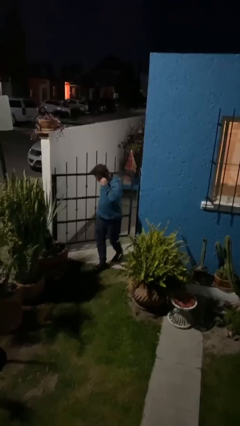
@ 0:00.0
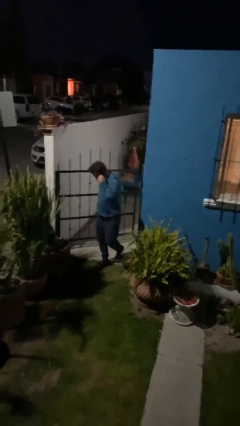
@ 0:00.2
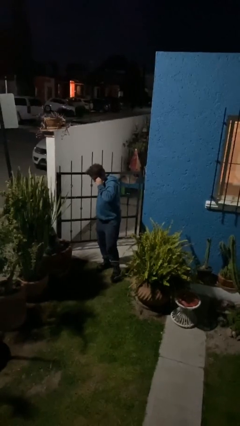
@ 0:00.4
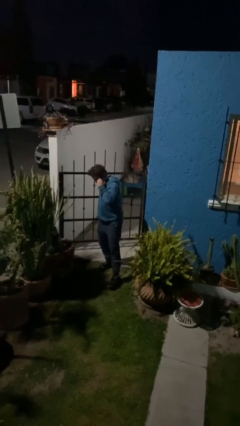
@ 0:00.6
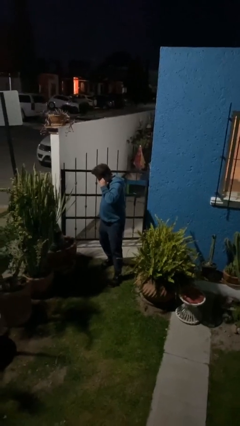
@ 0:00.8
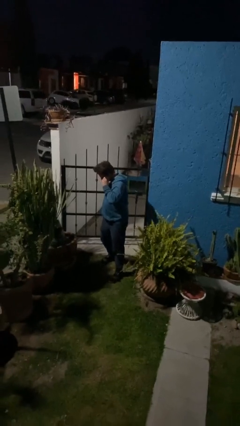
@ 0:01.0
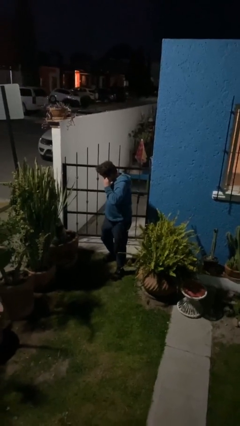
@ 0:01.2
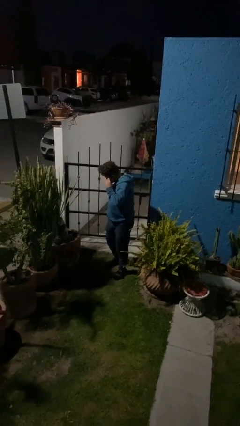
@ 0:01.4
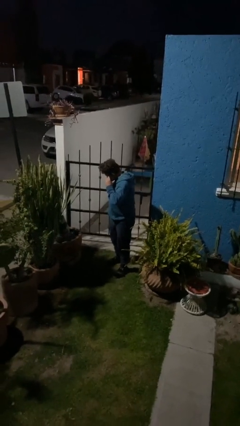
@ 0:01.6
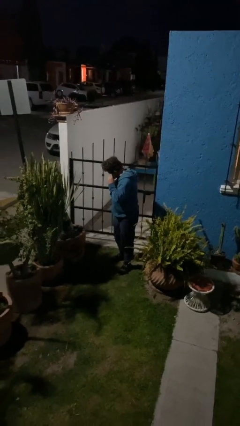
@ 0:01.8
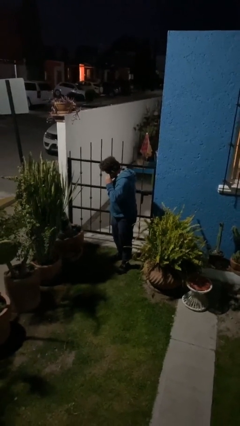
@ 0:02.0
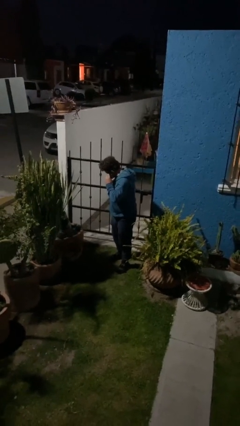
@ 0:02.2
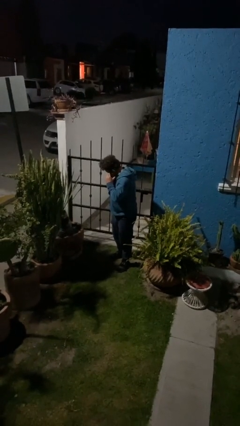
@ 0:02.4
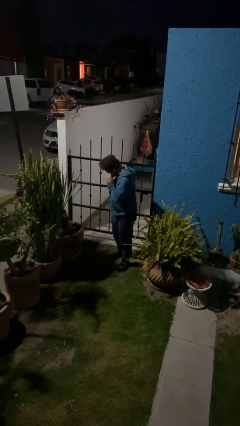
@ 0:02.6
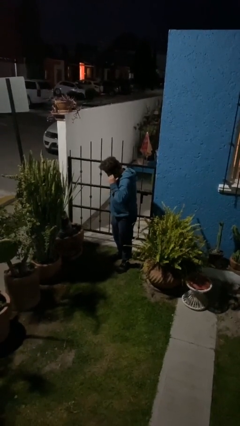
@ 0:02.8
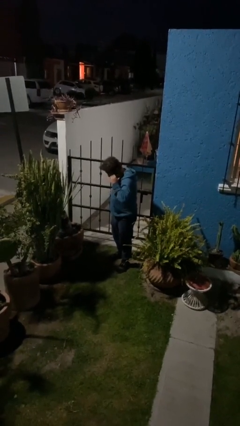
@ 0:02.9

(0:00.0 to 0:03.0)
person closes facility door

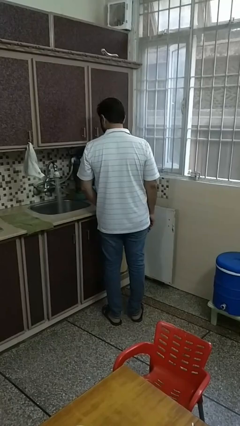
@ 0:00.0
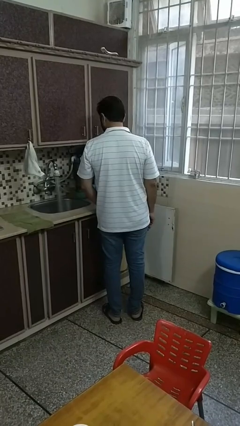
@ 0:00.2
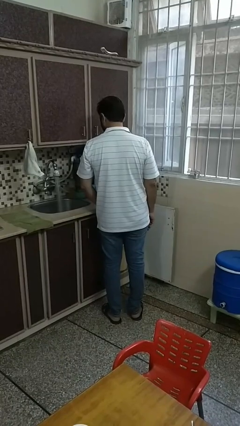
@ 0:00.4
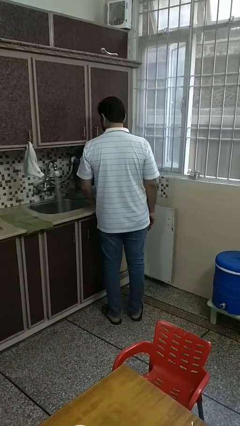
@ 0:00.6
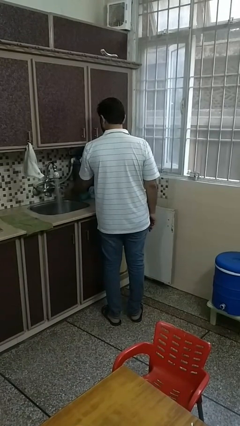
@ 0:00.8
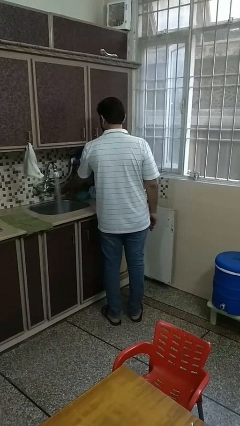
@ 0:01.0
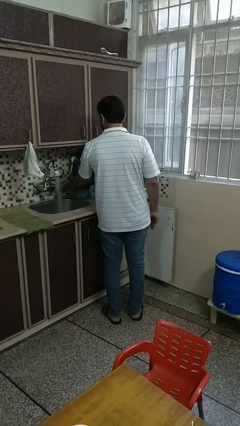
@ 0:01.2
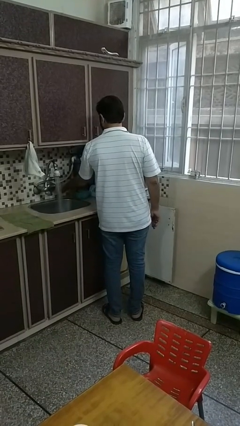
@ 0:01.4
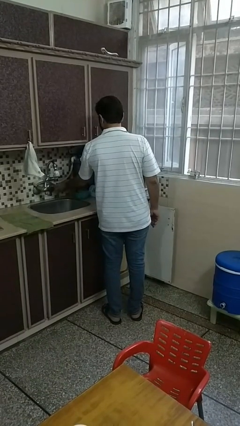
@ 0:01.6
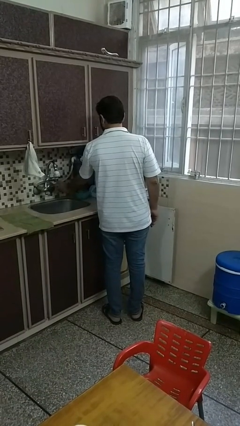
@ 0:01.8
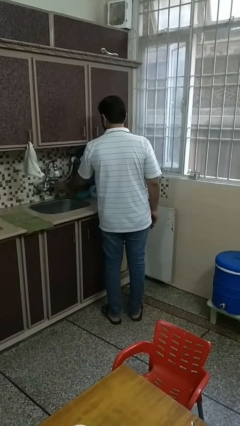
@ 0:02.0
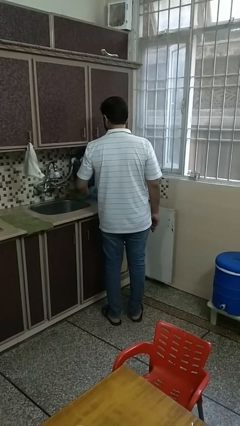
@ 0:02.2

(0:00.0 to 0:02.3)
person turns off faucet

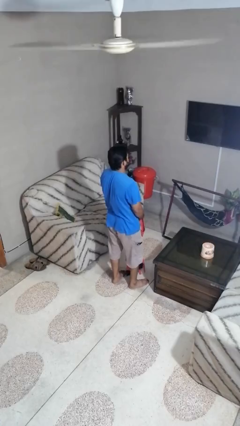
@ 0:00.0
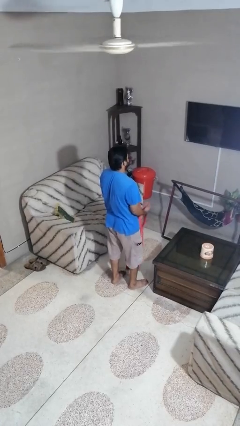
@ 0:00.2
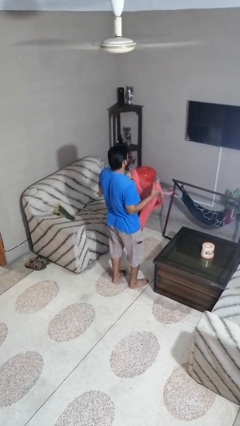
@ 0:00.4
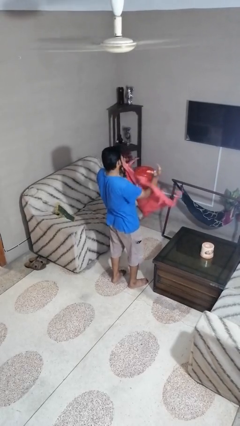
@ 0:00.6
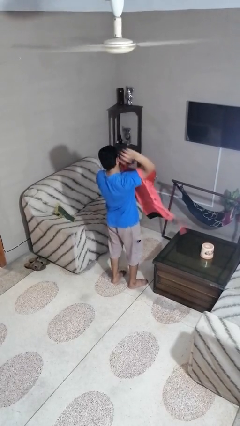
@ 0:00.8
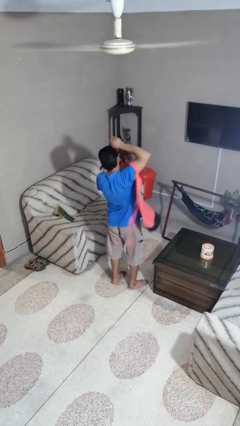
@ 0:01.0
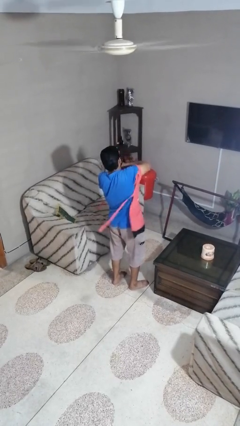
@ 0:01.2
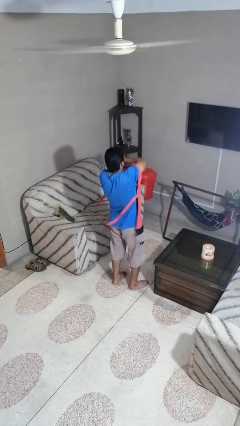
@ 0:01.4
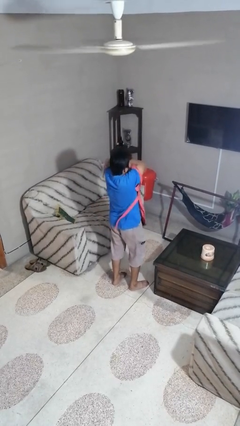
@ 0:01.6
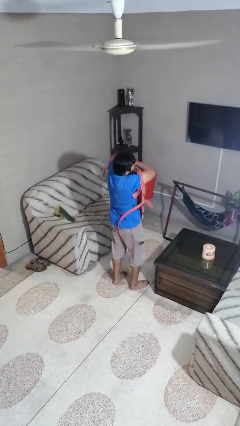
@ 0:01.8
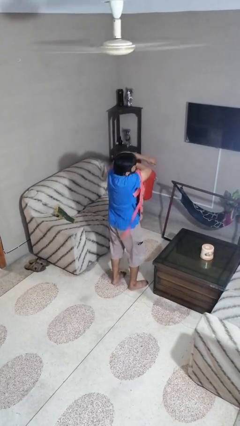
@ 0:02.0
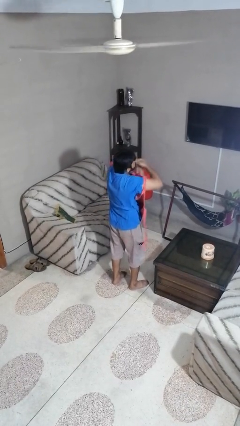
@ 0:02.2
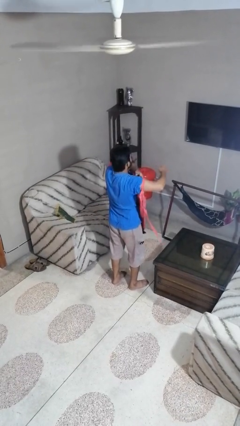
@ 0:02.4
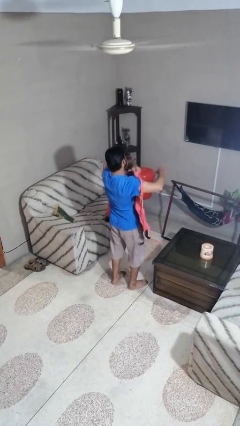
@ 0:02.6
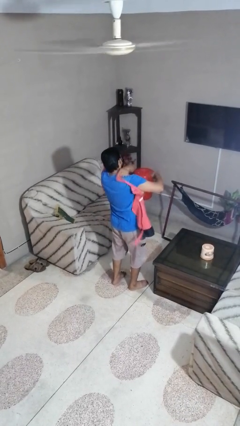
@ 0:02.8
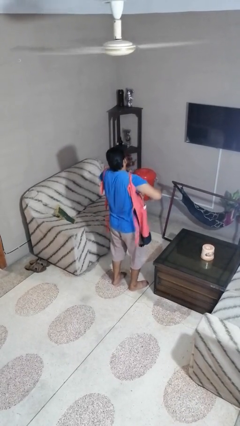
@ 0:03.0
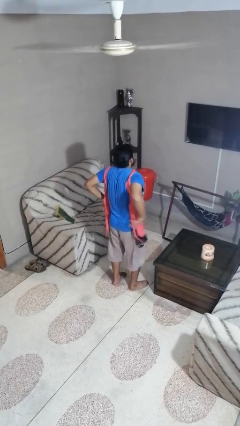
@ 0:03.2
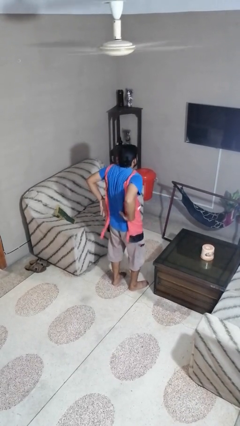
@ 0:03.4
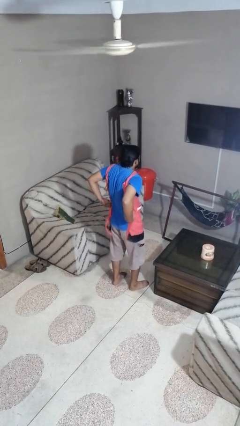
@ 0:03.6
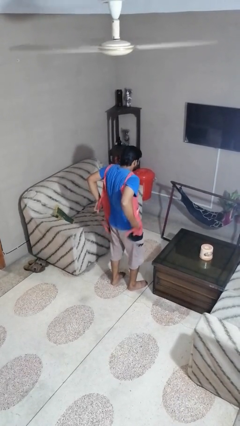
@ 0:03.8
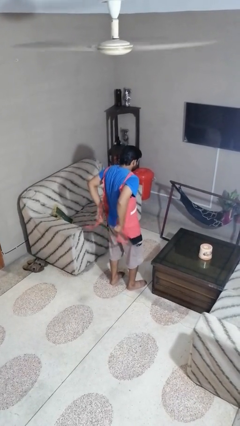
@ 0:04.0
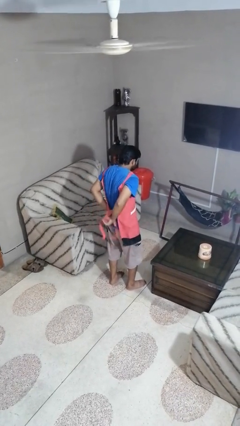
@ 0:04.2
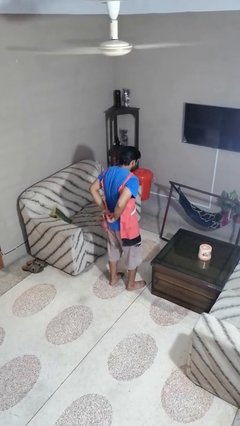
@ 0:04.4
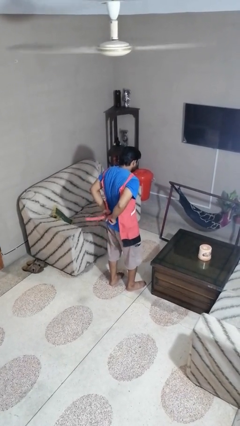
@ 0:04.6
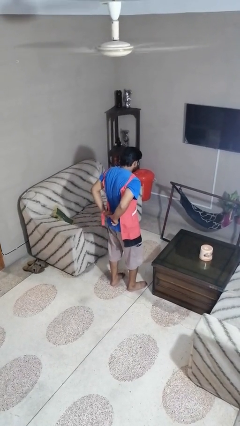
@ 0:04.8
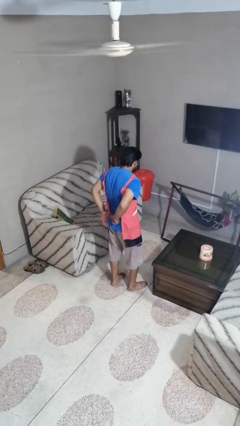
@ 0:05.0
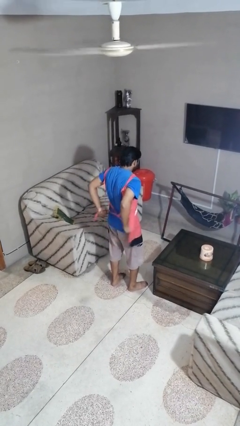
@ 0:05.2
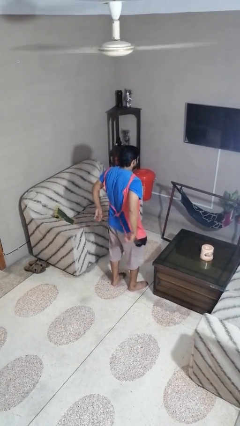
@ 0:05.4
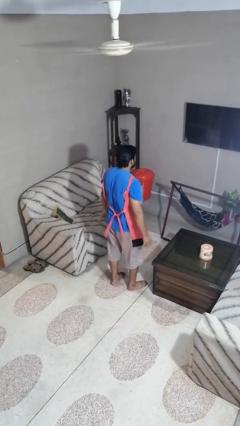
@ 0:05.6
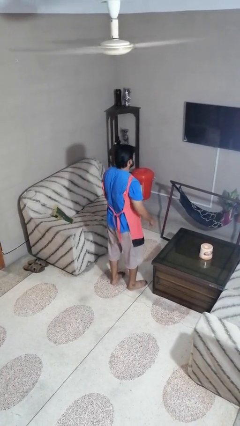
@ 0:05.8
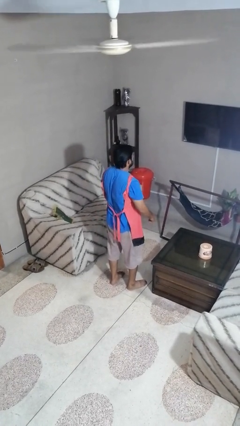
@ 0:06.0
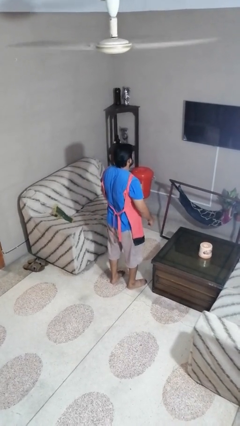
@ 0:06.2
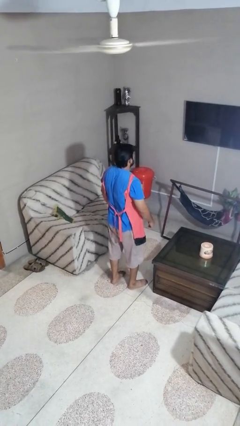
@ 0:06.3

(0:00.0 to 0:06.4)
person puts on apron

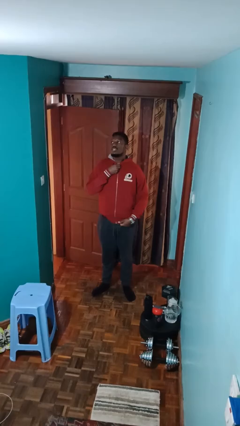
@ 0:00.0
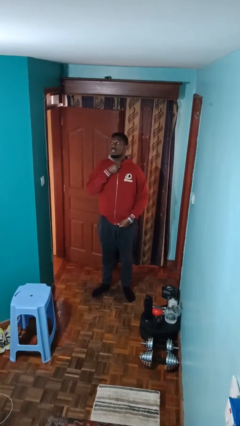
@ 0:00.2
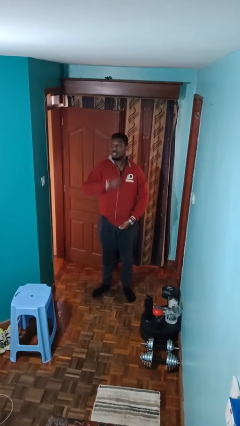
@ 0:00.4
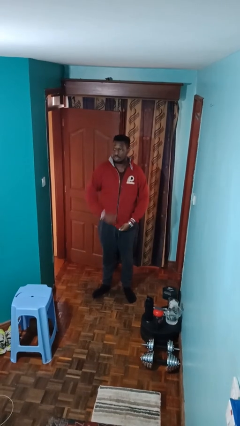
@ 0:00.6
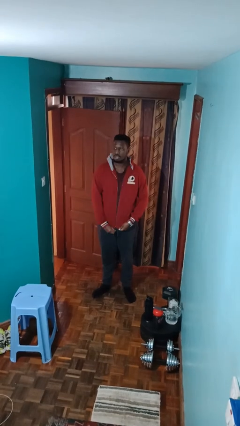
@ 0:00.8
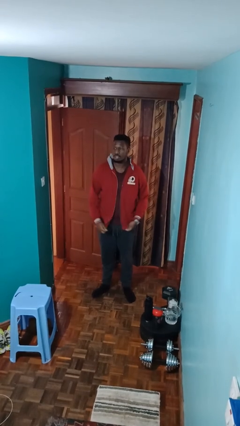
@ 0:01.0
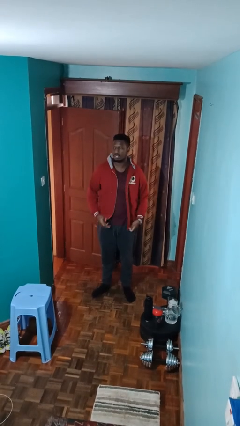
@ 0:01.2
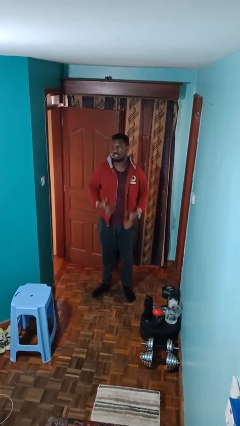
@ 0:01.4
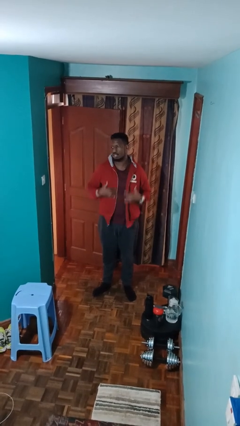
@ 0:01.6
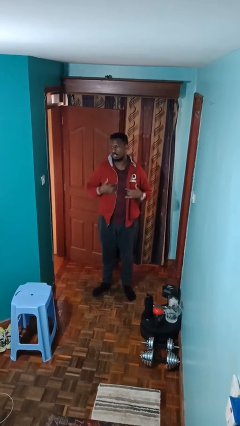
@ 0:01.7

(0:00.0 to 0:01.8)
person unzips jacket

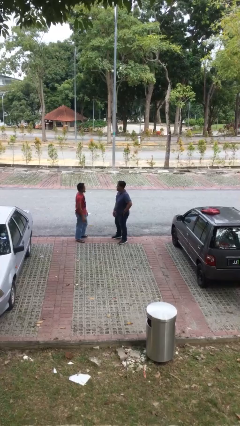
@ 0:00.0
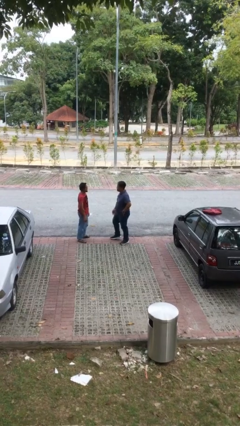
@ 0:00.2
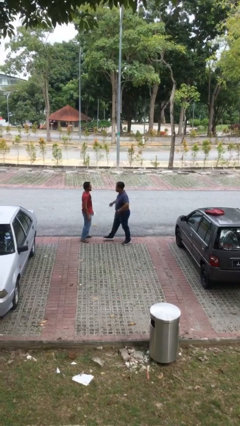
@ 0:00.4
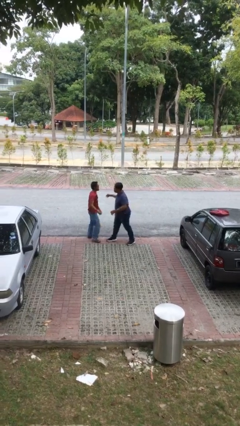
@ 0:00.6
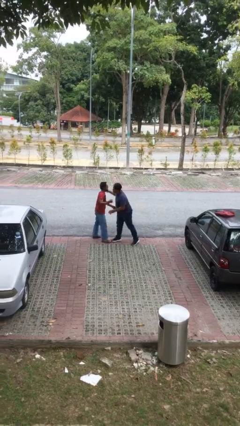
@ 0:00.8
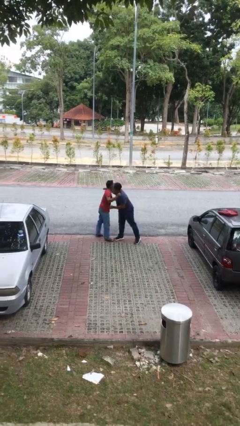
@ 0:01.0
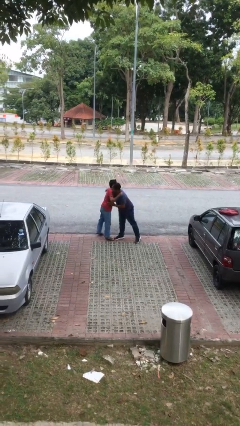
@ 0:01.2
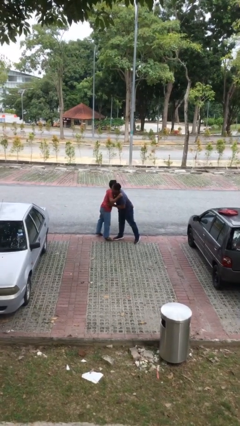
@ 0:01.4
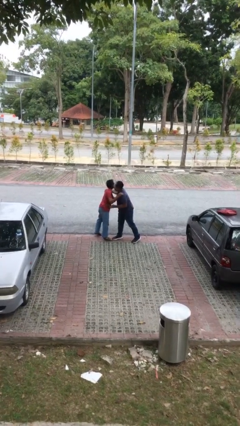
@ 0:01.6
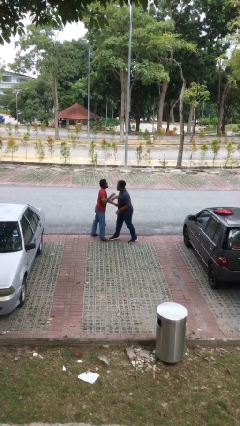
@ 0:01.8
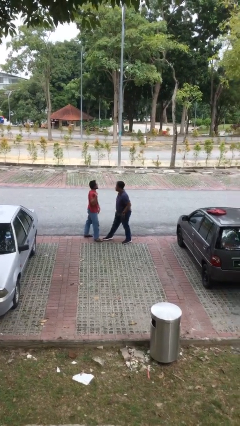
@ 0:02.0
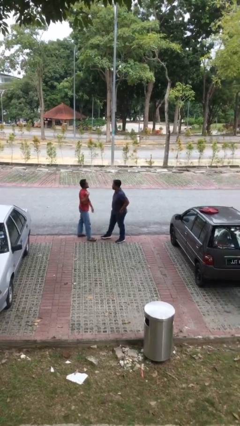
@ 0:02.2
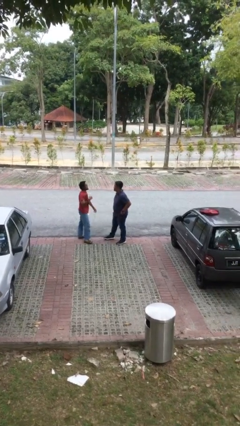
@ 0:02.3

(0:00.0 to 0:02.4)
person embraces person

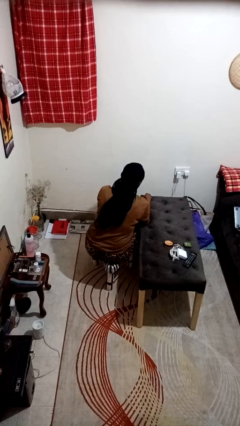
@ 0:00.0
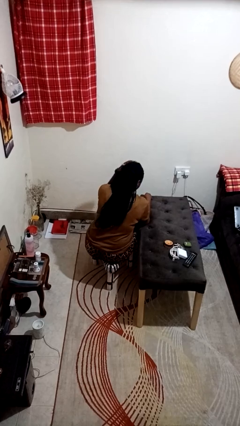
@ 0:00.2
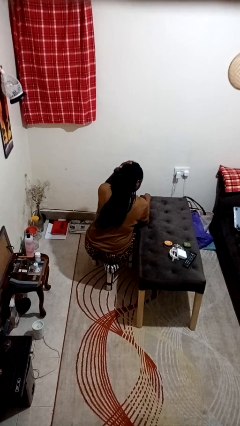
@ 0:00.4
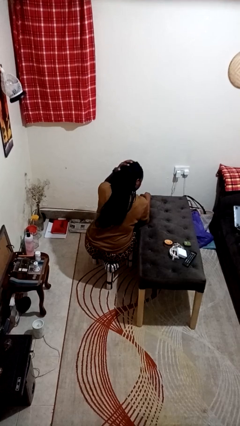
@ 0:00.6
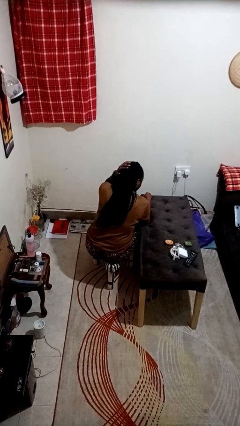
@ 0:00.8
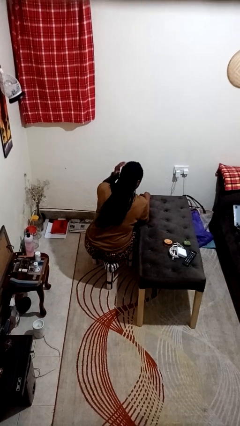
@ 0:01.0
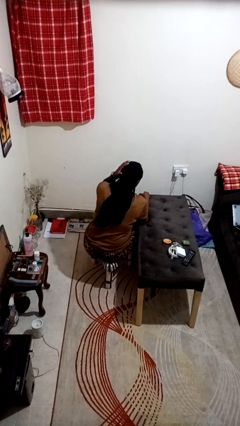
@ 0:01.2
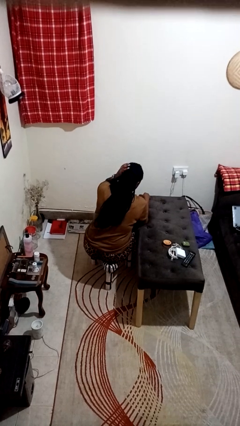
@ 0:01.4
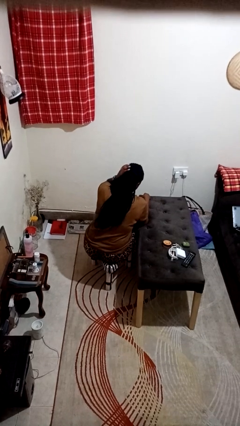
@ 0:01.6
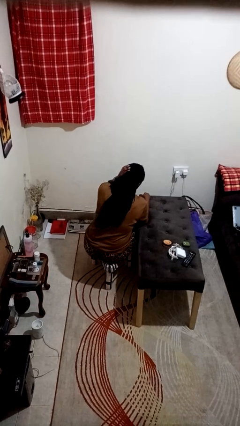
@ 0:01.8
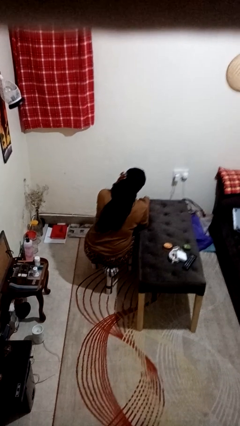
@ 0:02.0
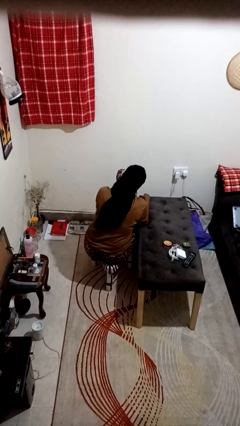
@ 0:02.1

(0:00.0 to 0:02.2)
person strokes hair
